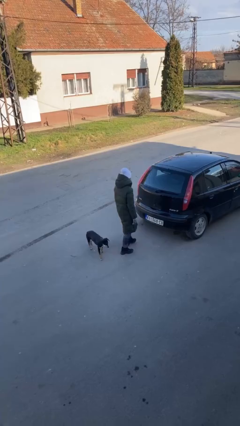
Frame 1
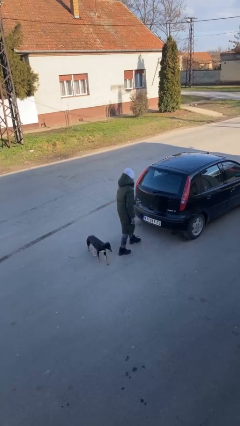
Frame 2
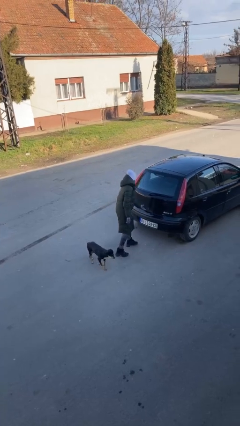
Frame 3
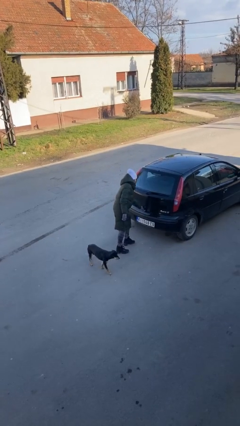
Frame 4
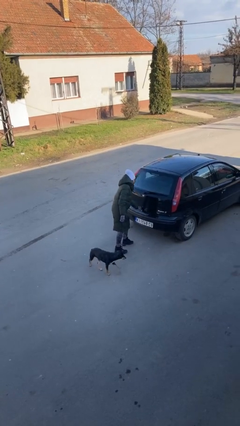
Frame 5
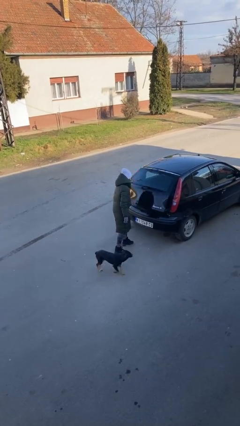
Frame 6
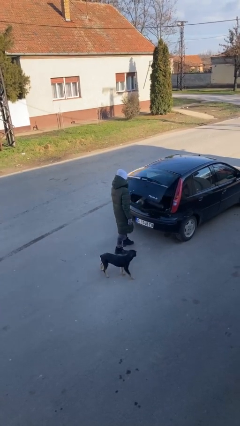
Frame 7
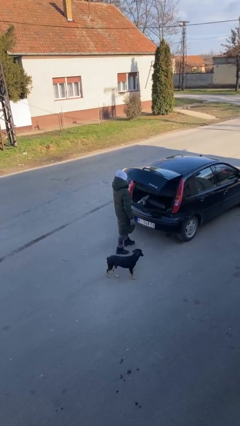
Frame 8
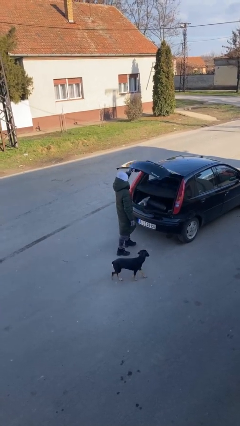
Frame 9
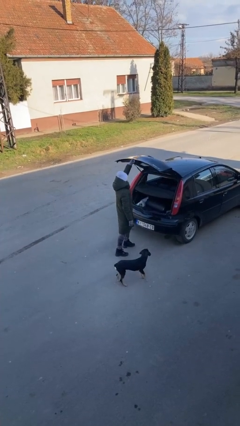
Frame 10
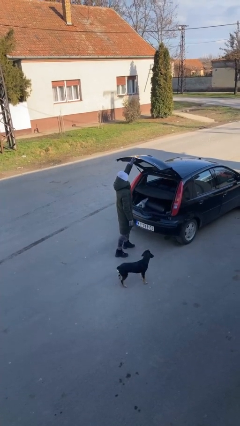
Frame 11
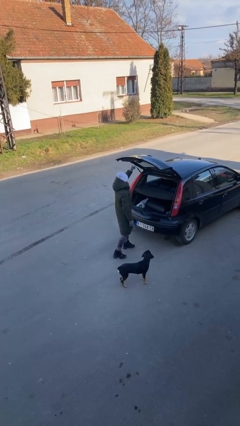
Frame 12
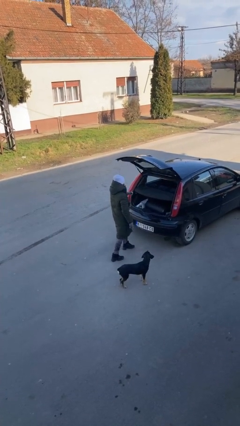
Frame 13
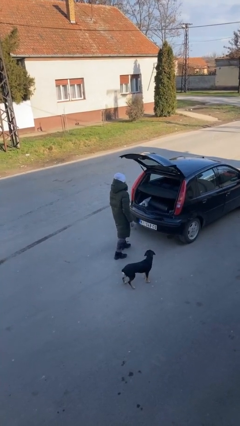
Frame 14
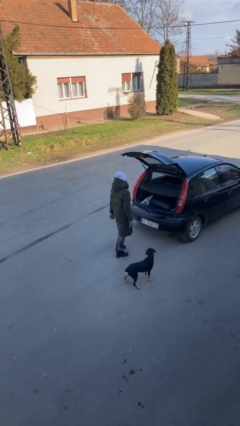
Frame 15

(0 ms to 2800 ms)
person opens car trunk

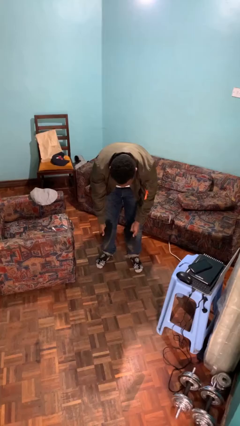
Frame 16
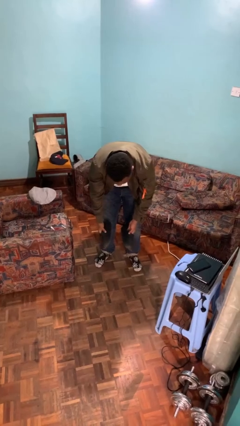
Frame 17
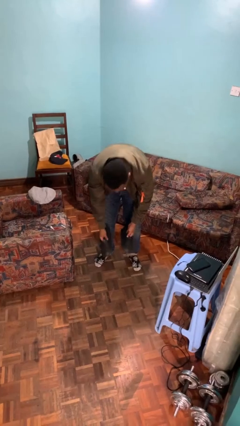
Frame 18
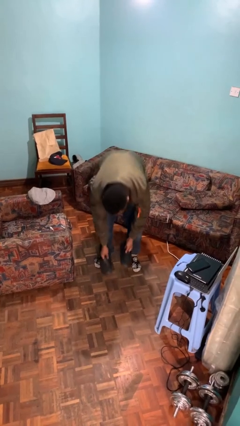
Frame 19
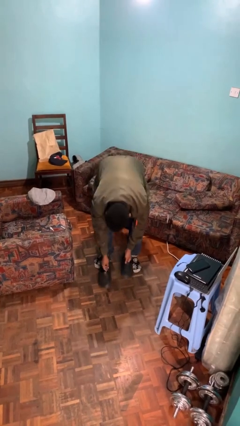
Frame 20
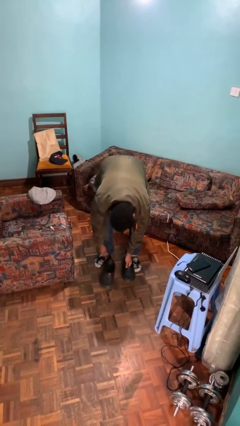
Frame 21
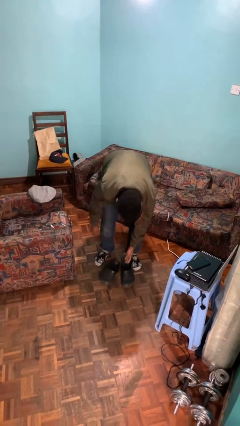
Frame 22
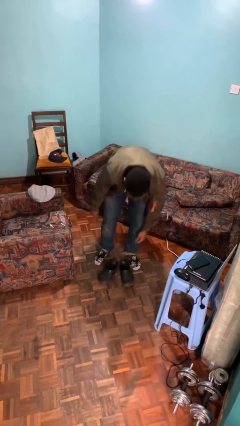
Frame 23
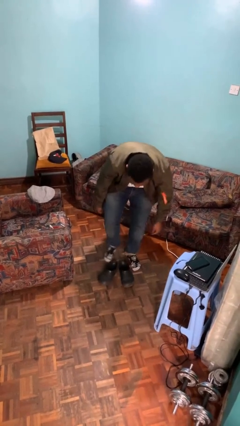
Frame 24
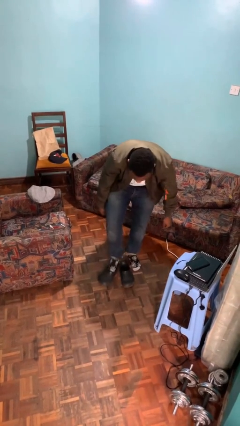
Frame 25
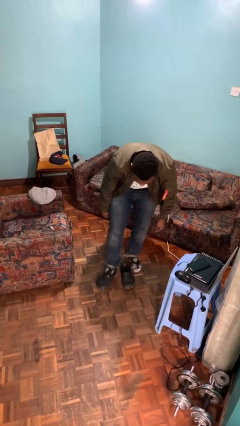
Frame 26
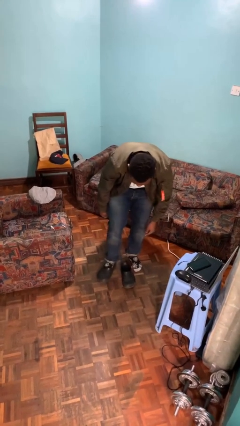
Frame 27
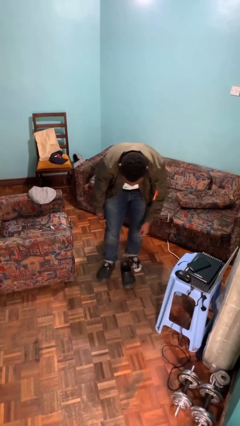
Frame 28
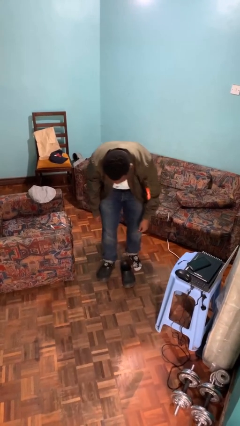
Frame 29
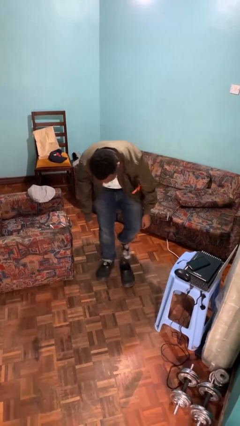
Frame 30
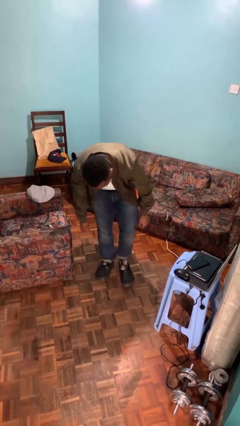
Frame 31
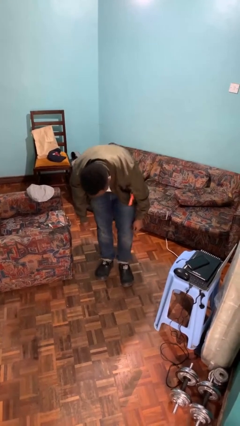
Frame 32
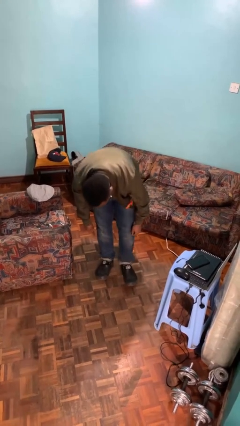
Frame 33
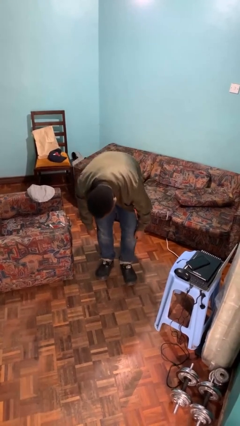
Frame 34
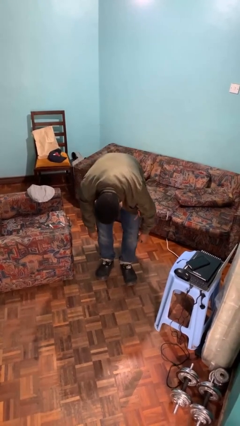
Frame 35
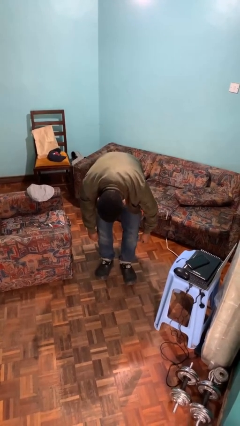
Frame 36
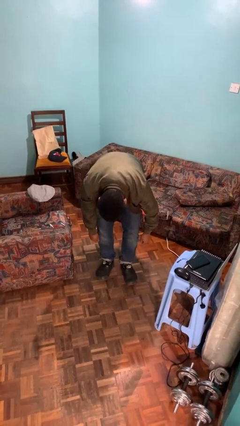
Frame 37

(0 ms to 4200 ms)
person puts on shoes

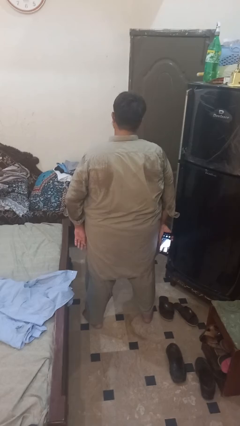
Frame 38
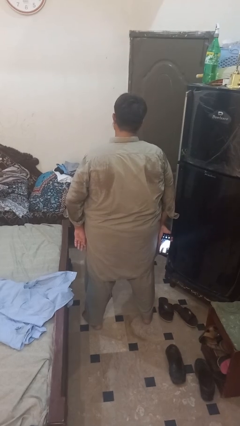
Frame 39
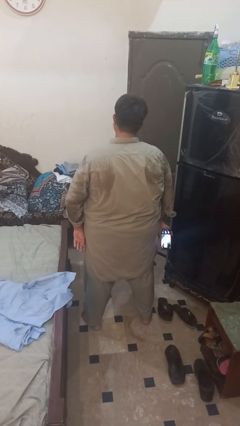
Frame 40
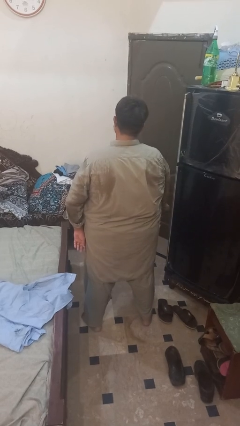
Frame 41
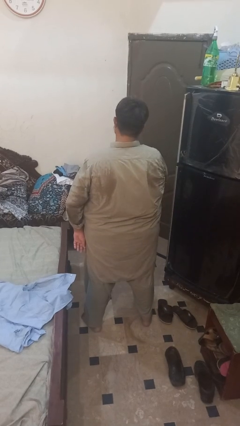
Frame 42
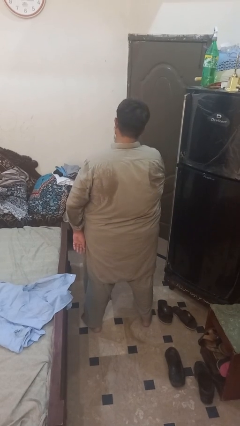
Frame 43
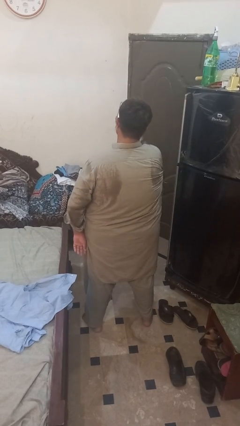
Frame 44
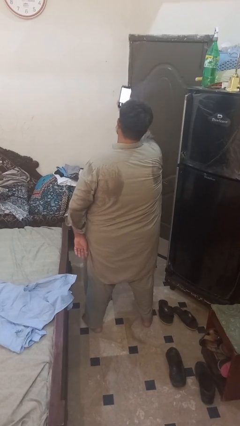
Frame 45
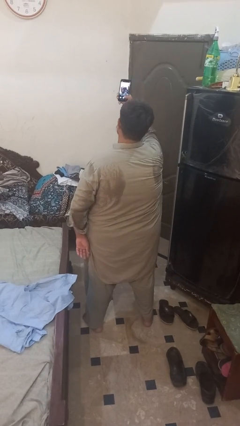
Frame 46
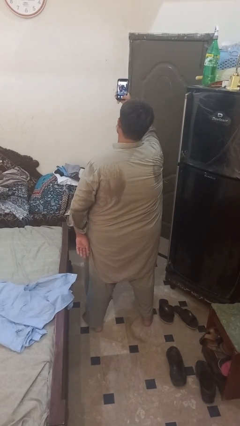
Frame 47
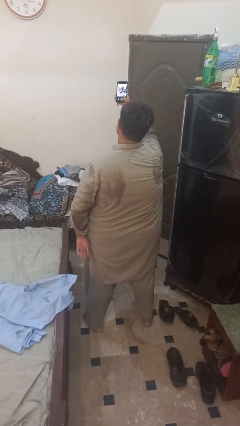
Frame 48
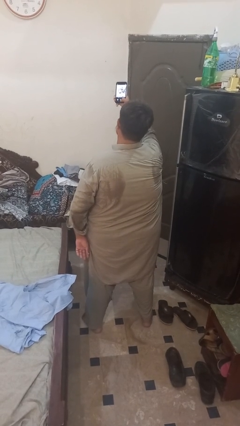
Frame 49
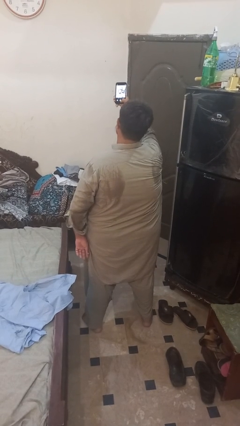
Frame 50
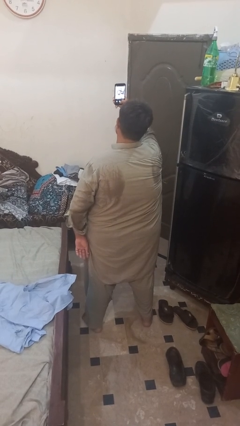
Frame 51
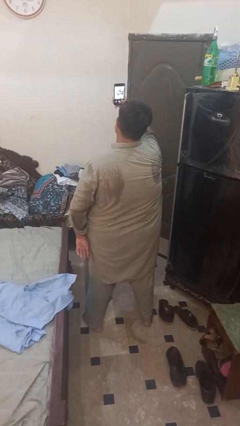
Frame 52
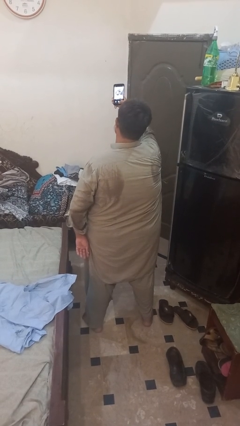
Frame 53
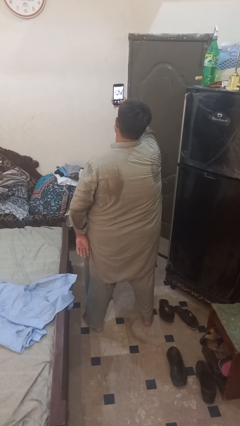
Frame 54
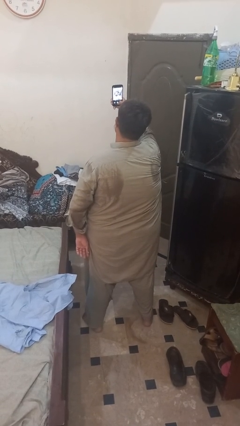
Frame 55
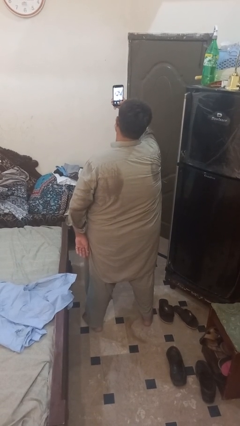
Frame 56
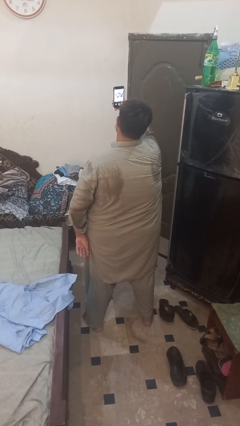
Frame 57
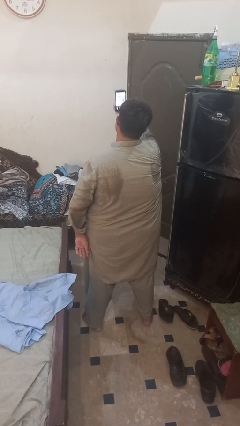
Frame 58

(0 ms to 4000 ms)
person takes selfie

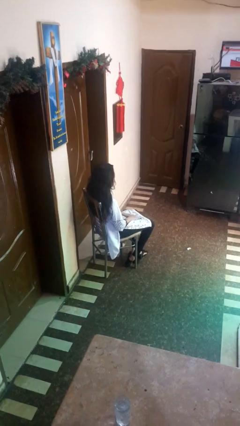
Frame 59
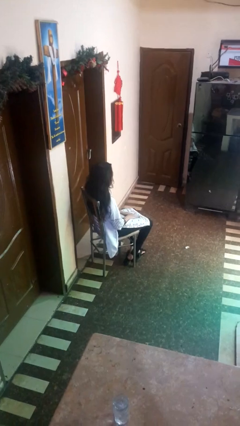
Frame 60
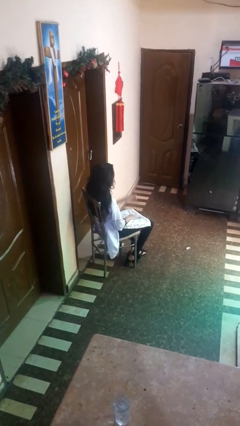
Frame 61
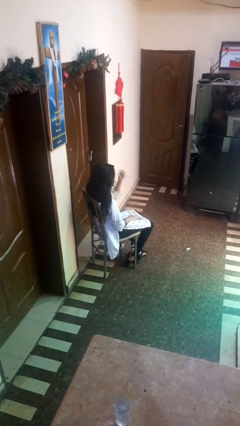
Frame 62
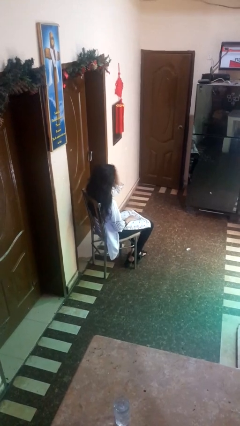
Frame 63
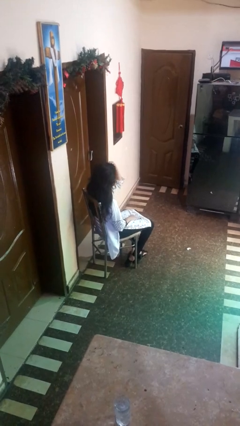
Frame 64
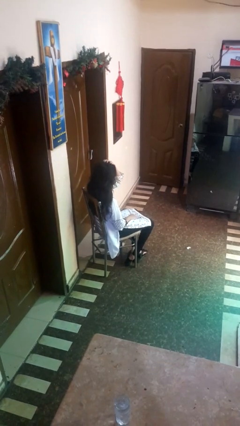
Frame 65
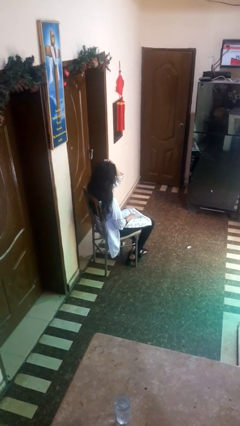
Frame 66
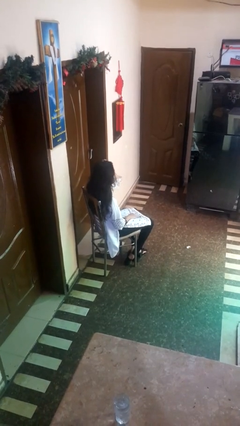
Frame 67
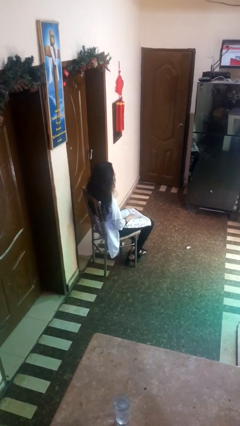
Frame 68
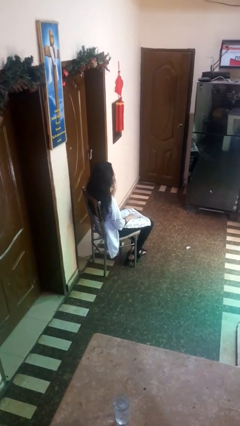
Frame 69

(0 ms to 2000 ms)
person strokes hair

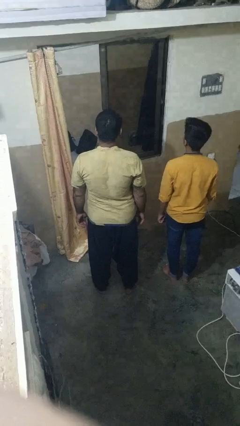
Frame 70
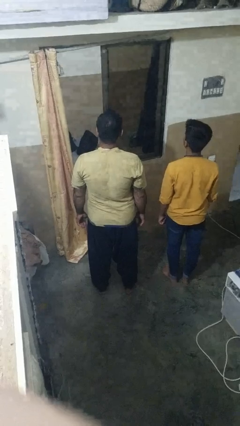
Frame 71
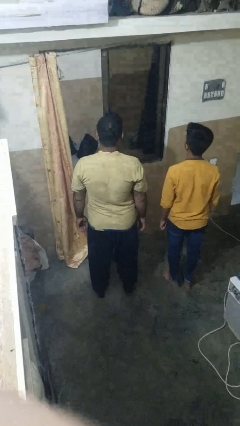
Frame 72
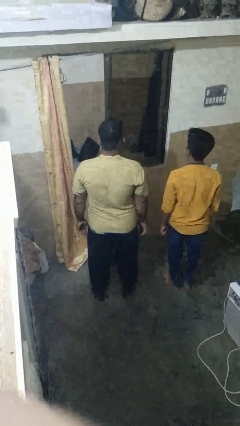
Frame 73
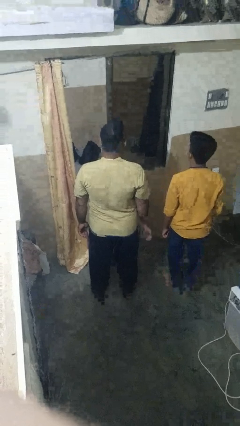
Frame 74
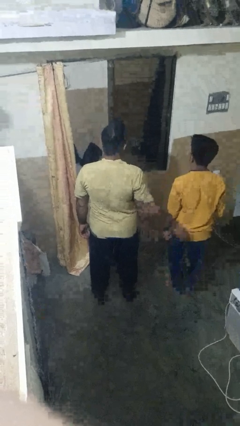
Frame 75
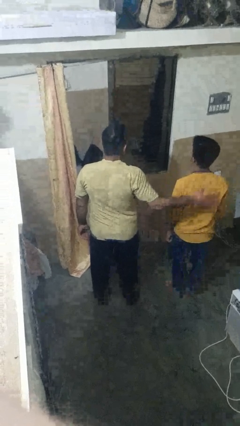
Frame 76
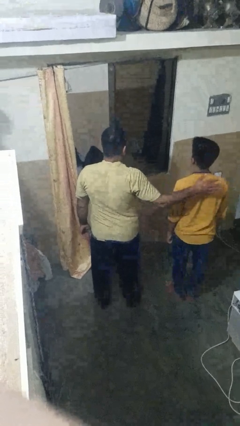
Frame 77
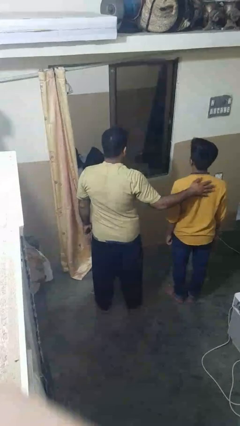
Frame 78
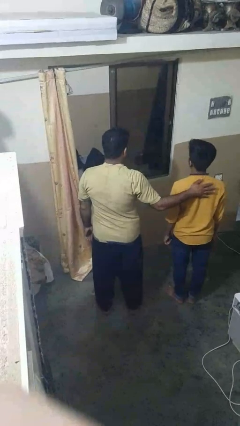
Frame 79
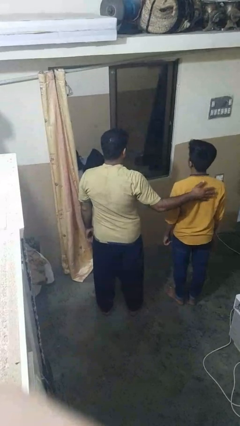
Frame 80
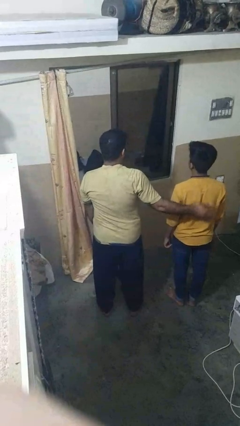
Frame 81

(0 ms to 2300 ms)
person touches back of person

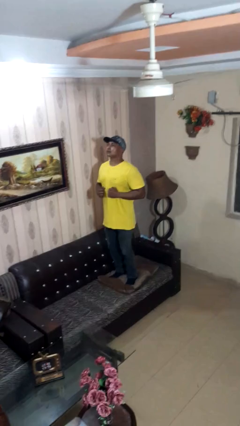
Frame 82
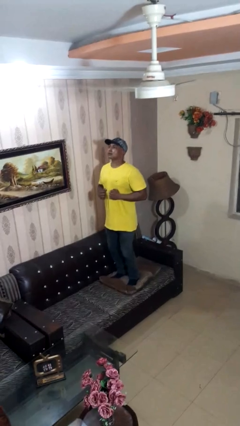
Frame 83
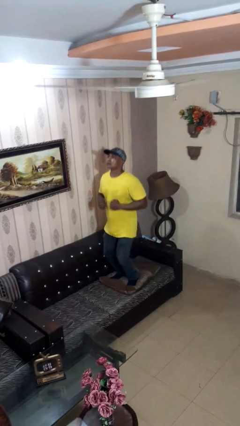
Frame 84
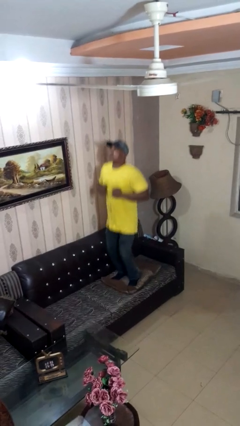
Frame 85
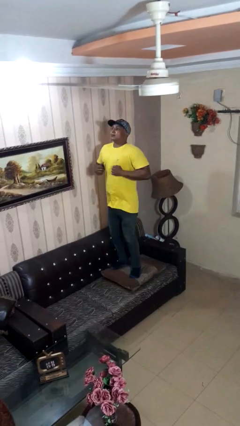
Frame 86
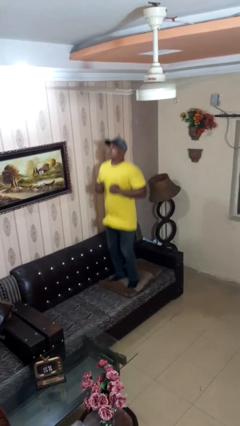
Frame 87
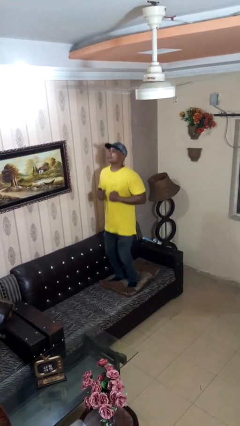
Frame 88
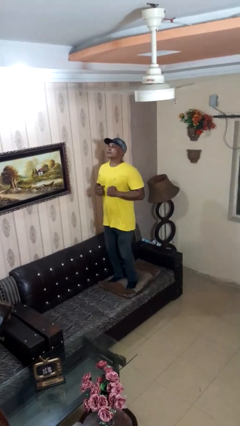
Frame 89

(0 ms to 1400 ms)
person jumps on couch

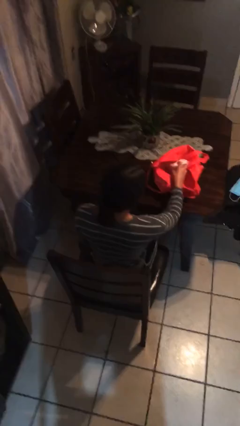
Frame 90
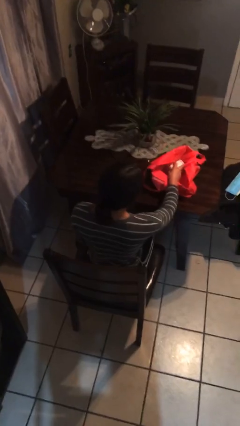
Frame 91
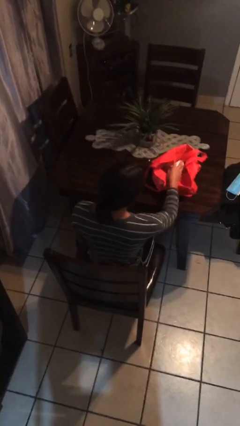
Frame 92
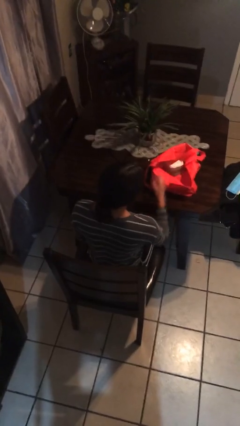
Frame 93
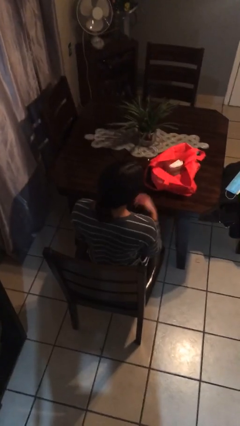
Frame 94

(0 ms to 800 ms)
person puts object into bag

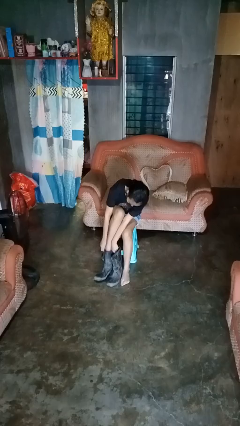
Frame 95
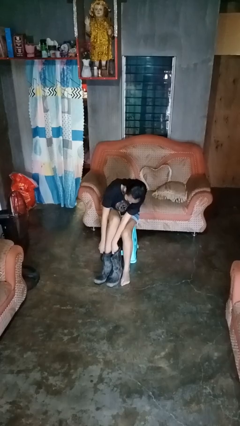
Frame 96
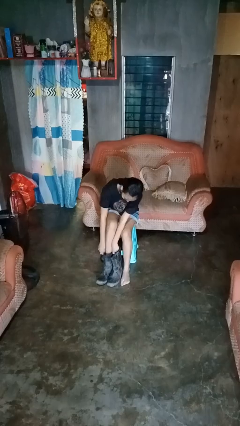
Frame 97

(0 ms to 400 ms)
person puts on boots
